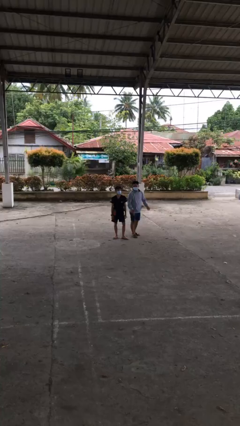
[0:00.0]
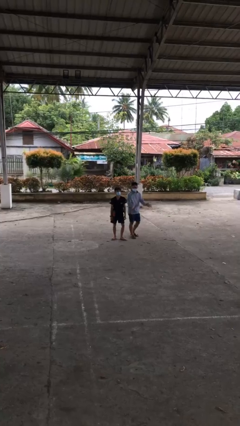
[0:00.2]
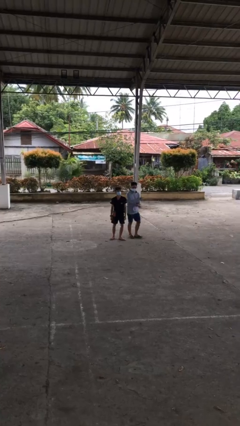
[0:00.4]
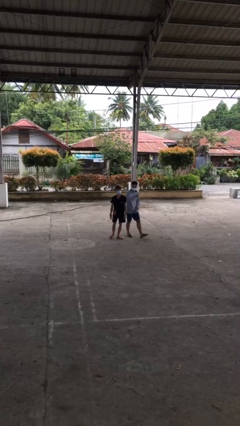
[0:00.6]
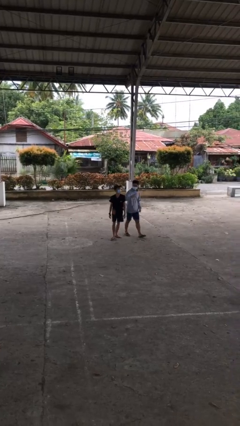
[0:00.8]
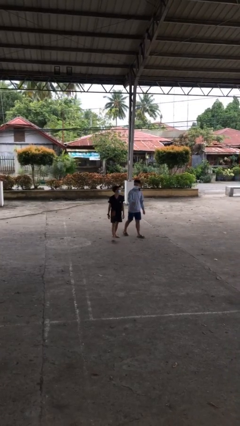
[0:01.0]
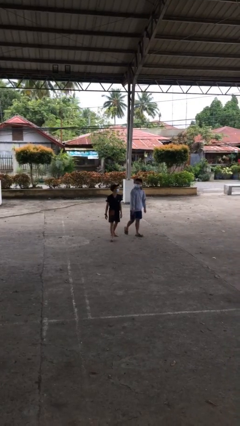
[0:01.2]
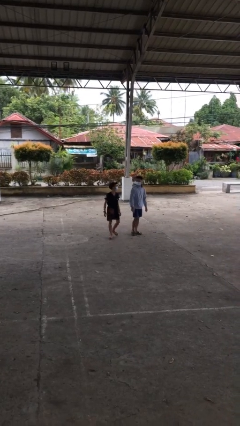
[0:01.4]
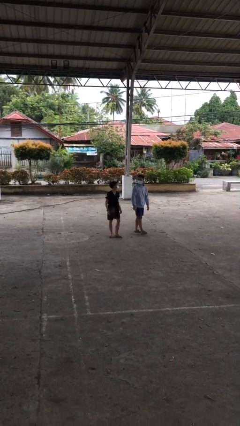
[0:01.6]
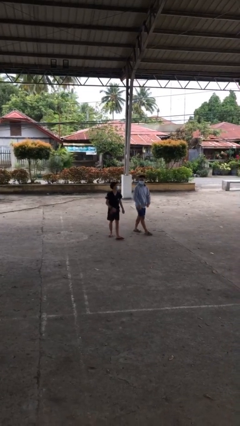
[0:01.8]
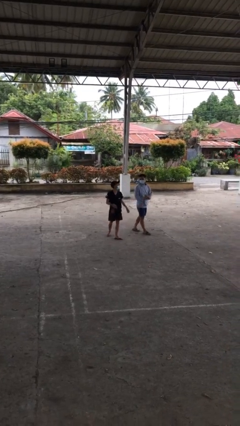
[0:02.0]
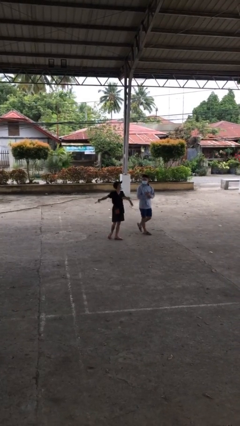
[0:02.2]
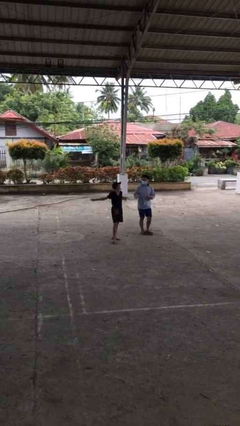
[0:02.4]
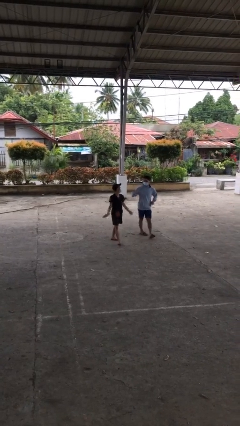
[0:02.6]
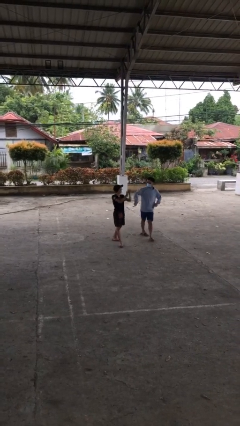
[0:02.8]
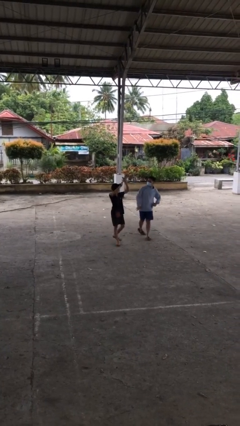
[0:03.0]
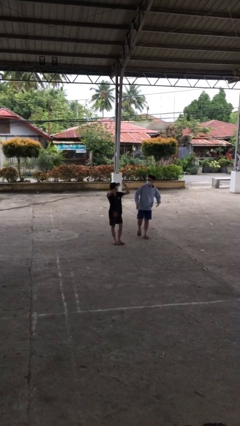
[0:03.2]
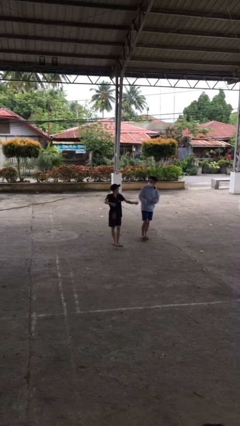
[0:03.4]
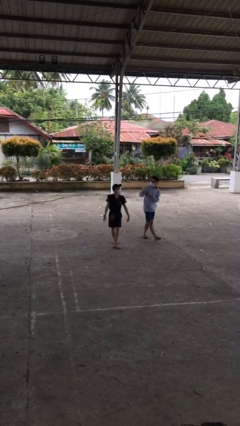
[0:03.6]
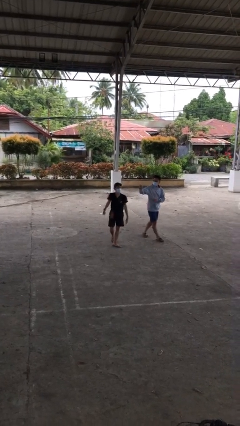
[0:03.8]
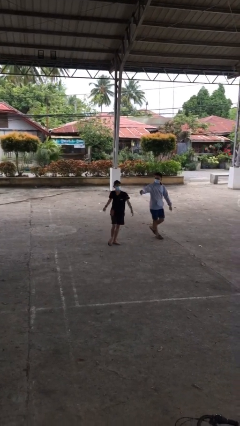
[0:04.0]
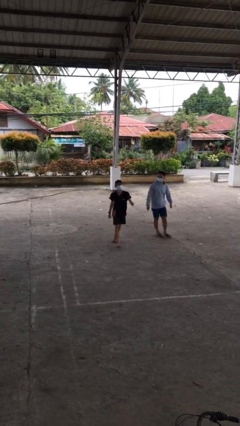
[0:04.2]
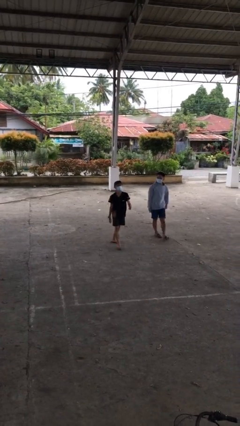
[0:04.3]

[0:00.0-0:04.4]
person talks to person

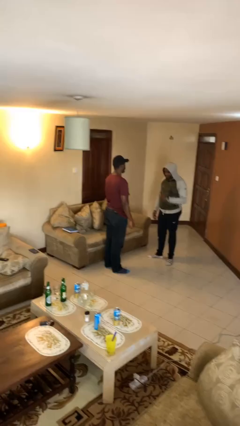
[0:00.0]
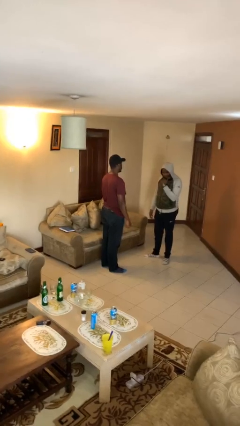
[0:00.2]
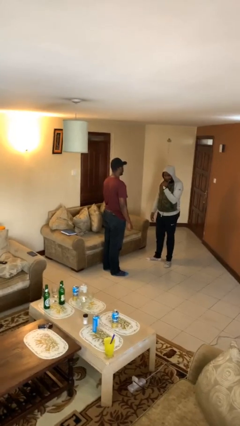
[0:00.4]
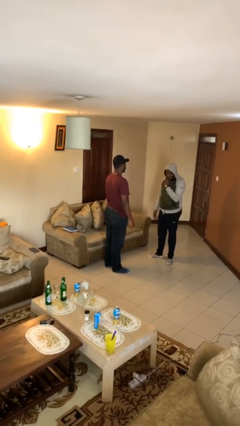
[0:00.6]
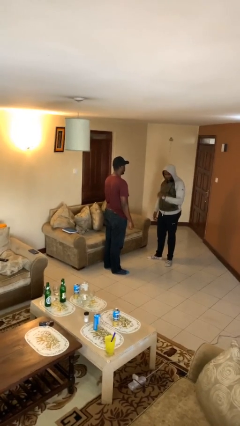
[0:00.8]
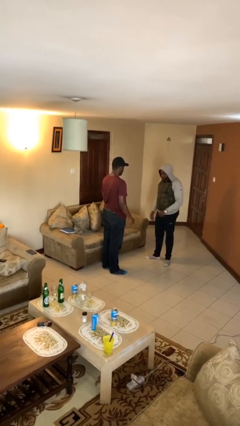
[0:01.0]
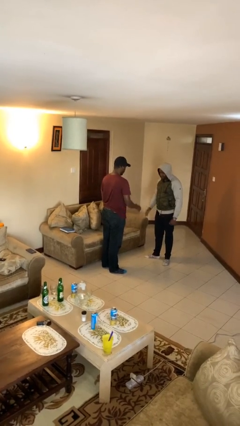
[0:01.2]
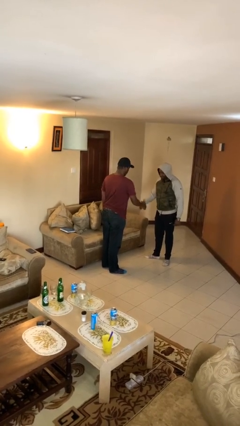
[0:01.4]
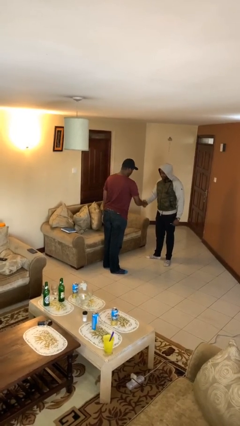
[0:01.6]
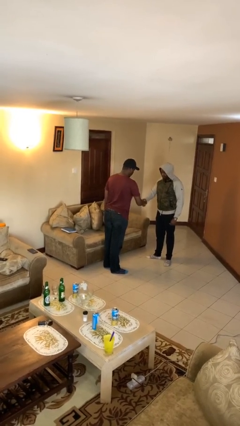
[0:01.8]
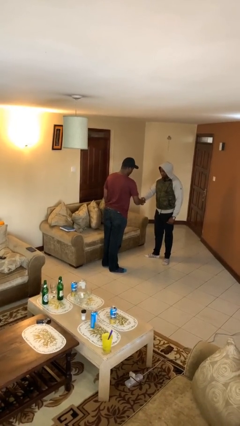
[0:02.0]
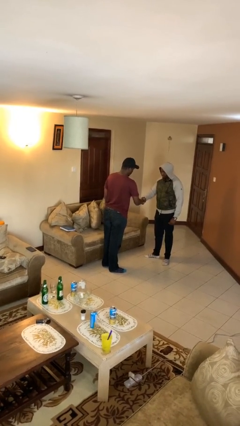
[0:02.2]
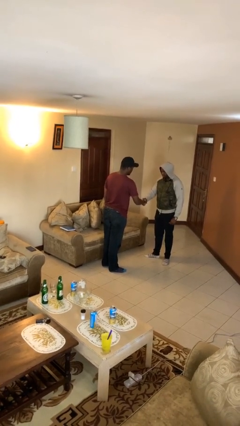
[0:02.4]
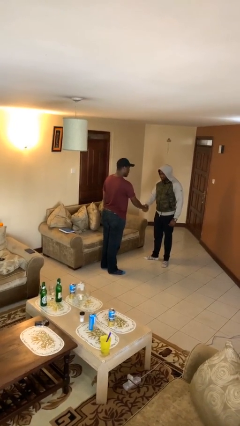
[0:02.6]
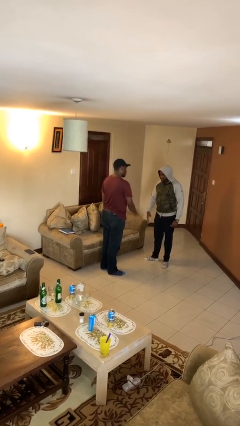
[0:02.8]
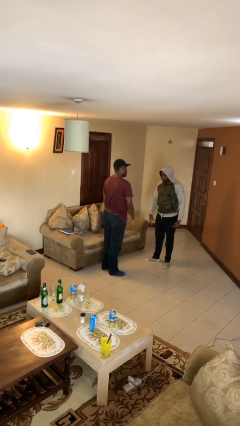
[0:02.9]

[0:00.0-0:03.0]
person highfives hand

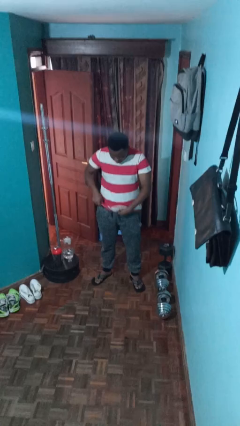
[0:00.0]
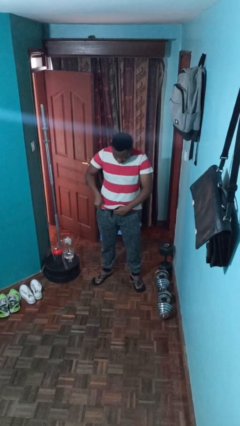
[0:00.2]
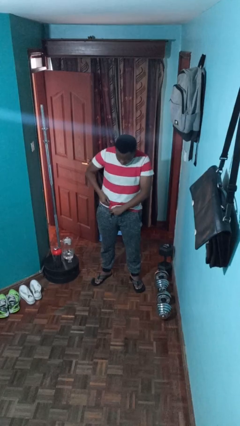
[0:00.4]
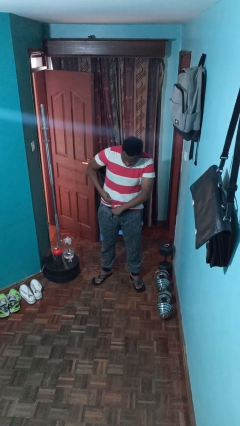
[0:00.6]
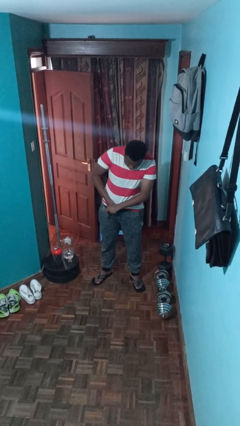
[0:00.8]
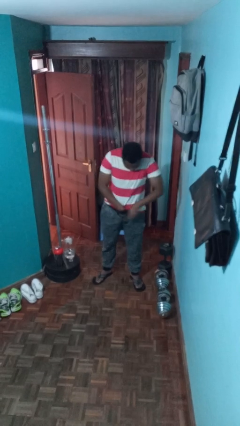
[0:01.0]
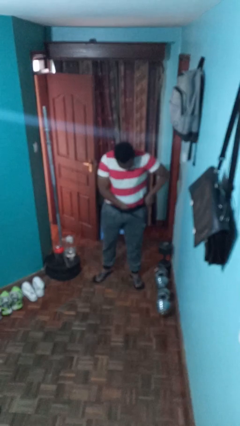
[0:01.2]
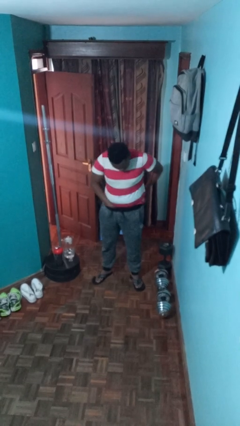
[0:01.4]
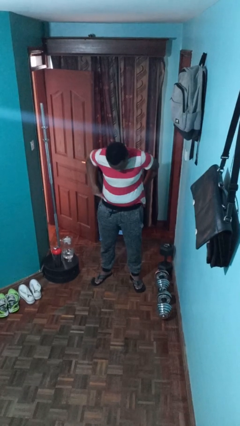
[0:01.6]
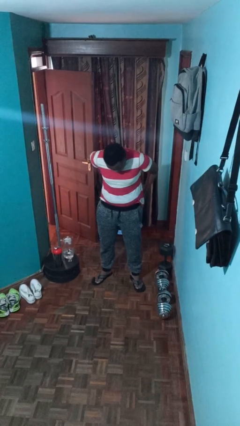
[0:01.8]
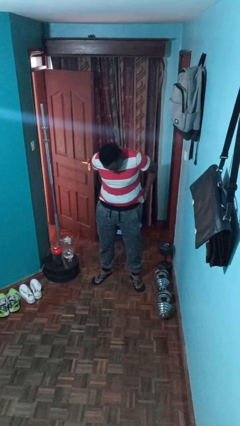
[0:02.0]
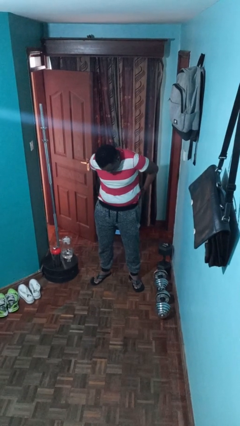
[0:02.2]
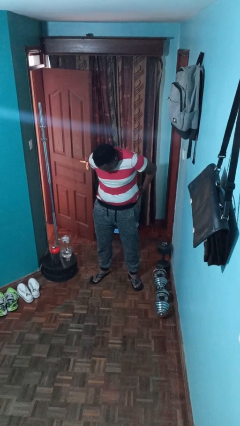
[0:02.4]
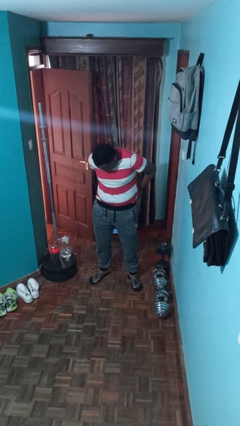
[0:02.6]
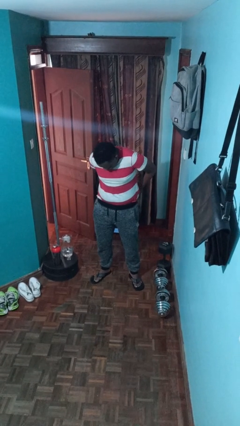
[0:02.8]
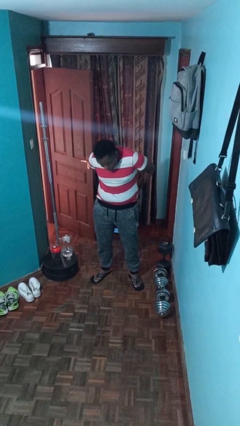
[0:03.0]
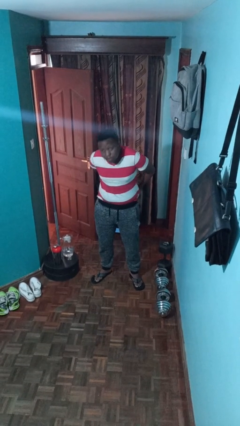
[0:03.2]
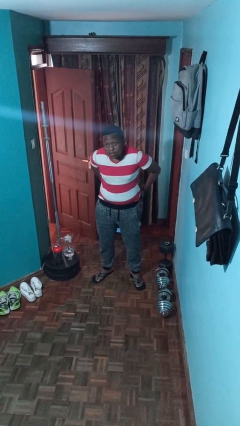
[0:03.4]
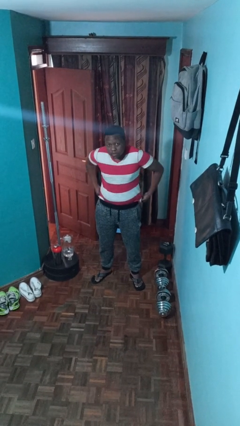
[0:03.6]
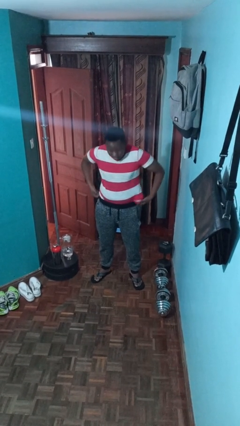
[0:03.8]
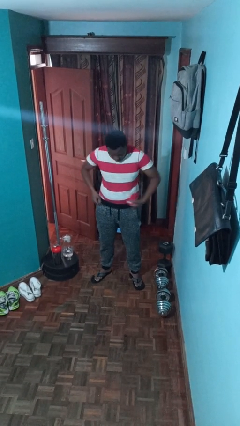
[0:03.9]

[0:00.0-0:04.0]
person tucks in shirt

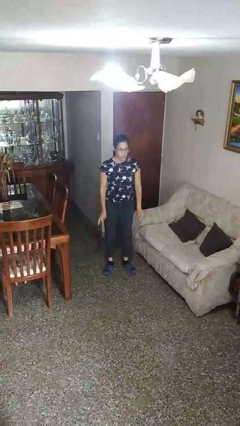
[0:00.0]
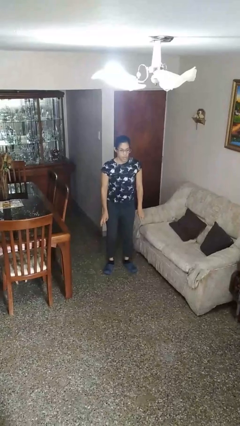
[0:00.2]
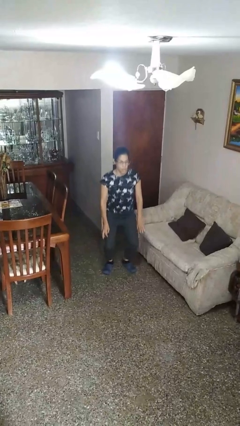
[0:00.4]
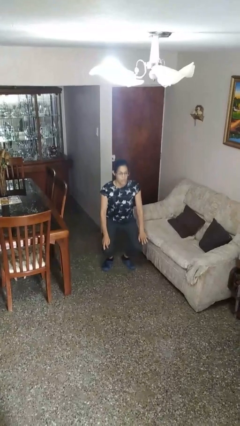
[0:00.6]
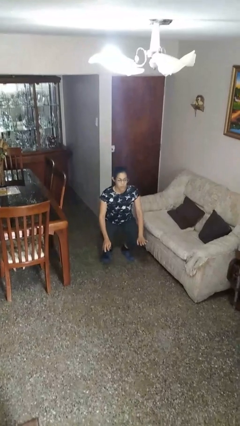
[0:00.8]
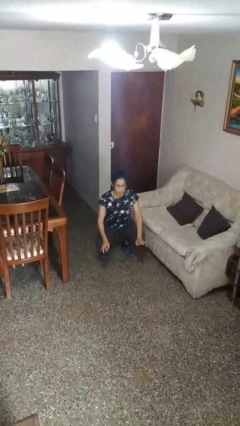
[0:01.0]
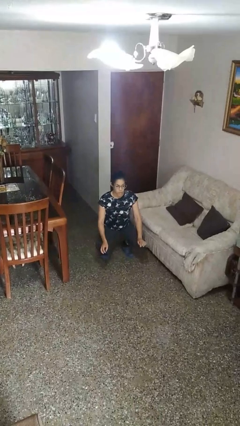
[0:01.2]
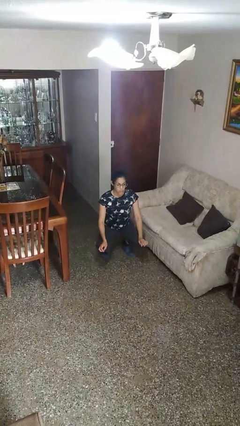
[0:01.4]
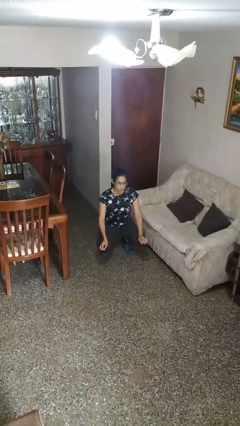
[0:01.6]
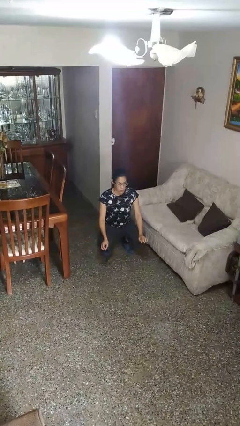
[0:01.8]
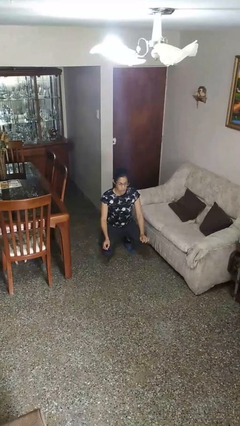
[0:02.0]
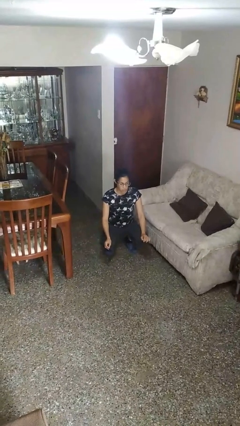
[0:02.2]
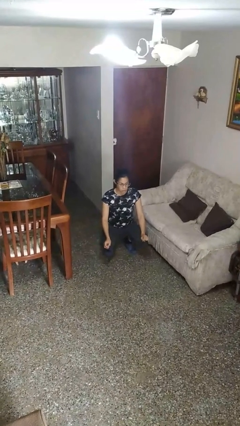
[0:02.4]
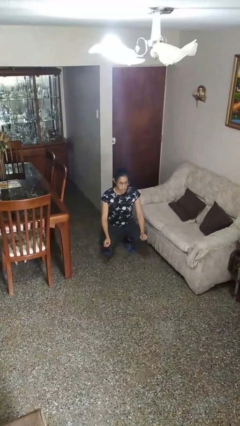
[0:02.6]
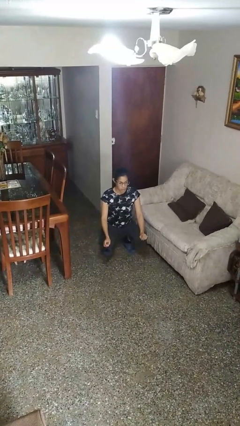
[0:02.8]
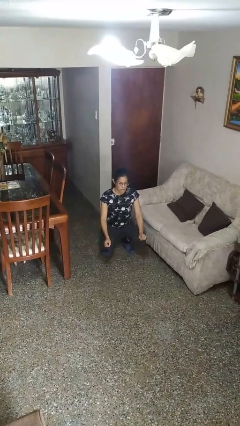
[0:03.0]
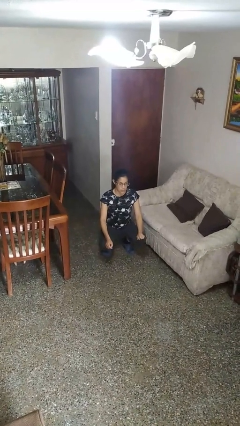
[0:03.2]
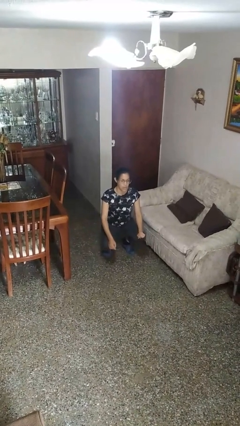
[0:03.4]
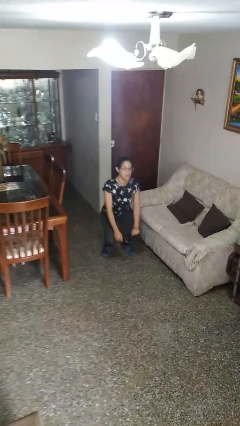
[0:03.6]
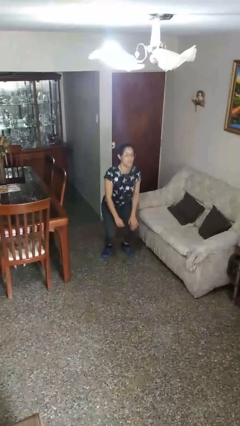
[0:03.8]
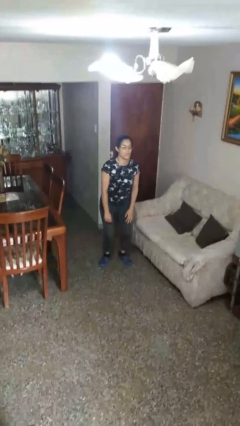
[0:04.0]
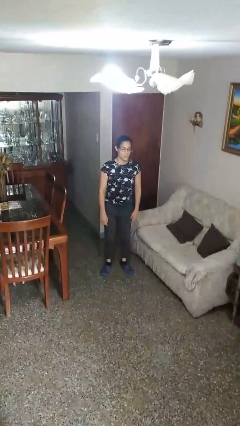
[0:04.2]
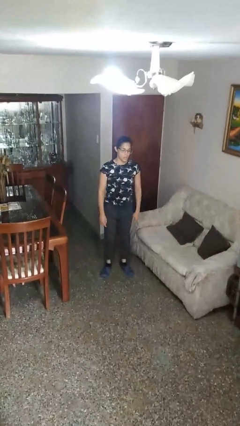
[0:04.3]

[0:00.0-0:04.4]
person squats

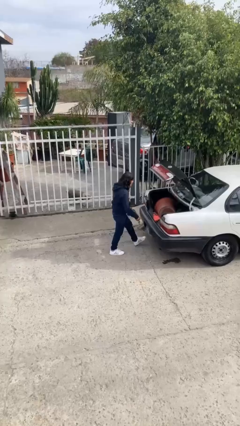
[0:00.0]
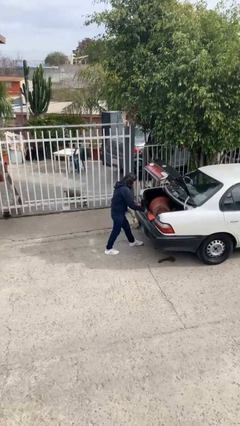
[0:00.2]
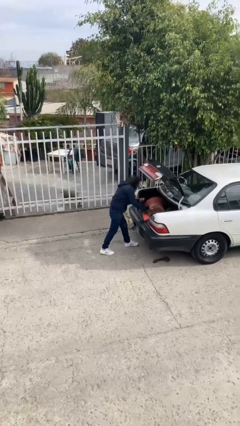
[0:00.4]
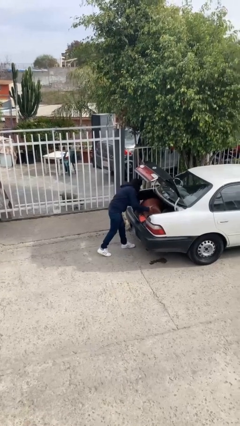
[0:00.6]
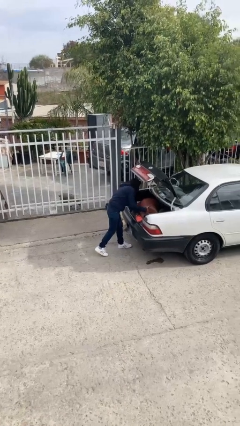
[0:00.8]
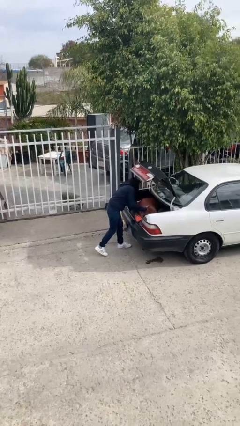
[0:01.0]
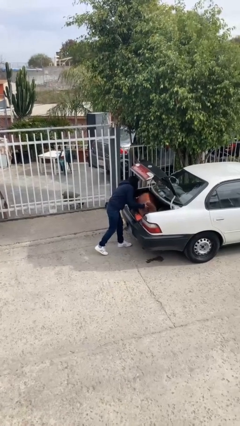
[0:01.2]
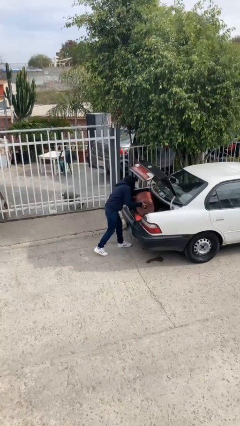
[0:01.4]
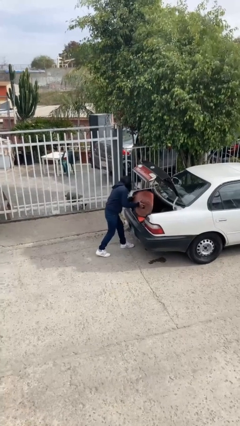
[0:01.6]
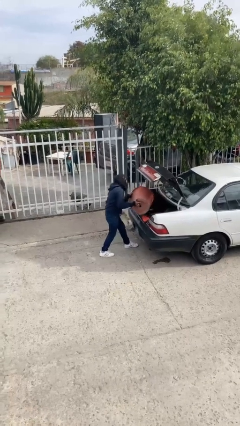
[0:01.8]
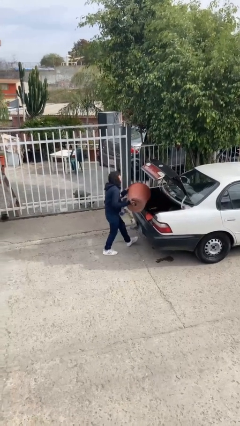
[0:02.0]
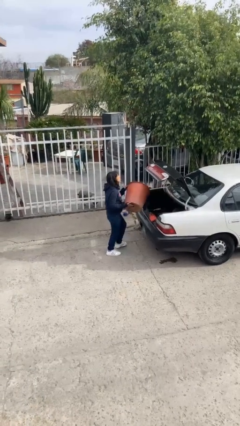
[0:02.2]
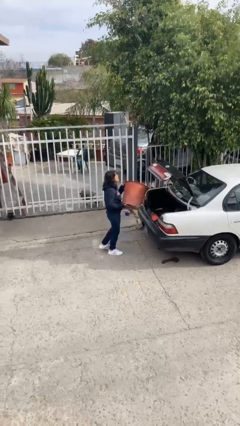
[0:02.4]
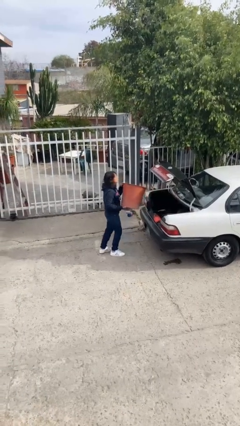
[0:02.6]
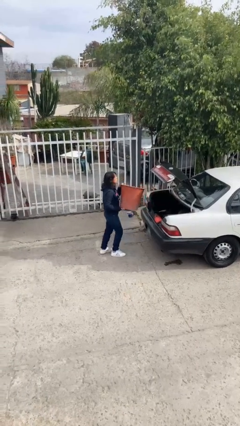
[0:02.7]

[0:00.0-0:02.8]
person unloads car
